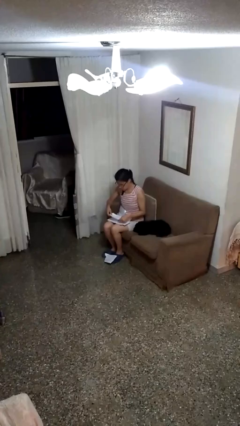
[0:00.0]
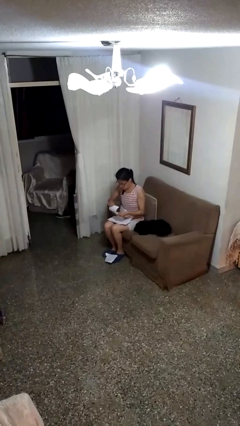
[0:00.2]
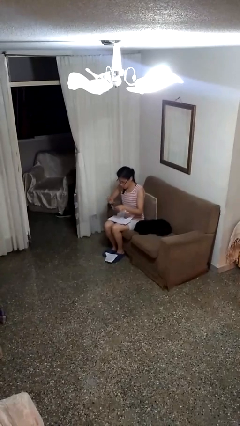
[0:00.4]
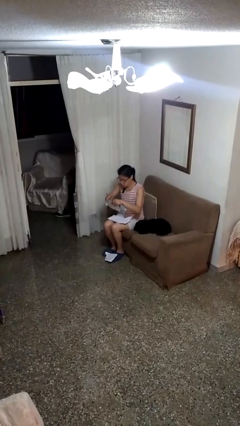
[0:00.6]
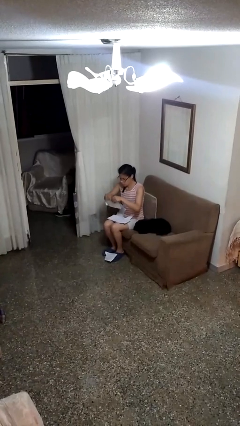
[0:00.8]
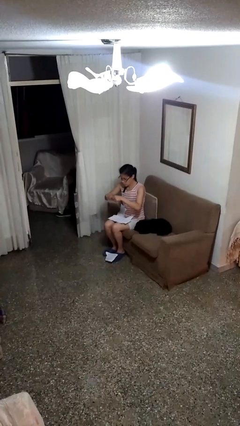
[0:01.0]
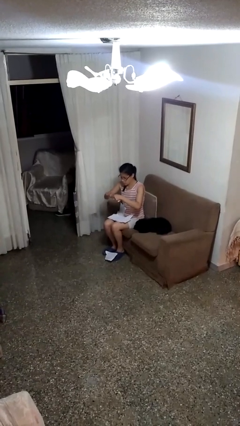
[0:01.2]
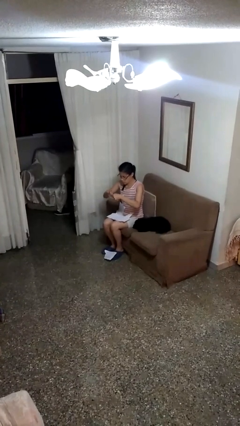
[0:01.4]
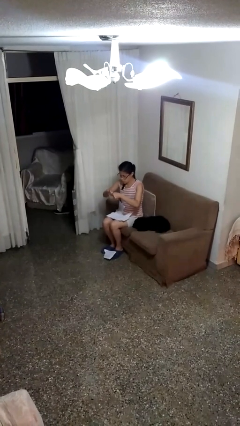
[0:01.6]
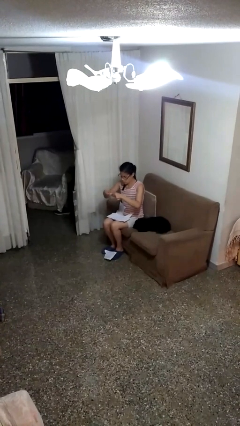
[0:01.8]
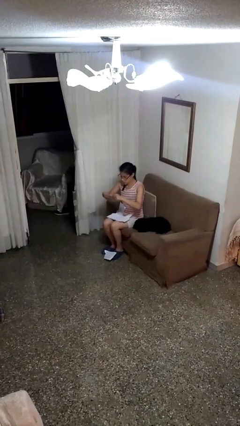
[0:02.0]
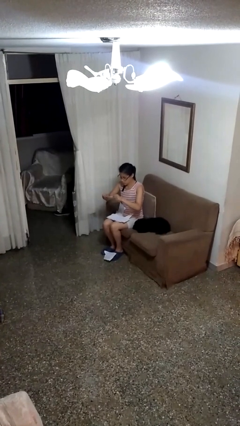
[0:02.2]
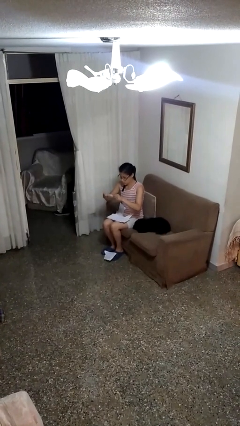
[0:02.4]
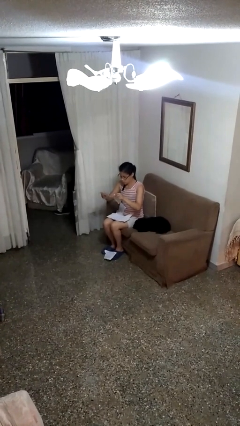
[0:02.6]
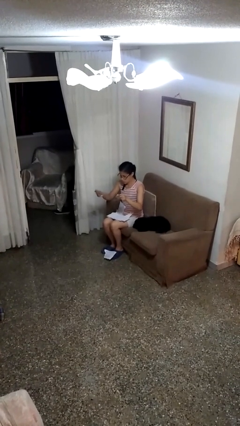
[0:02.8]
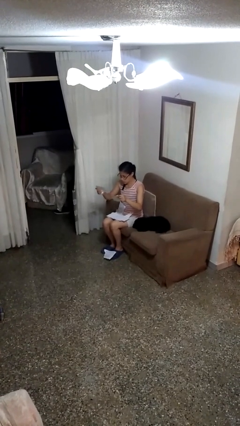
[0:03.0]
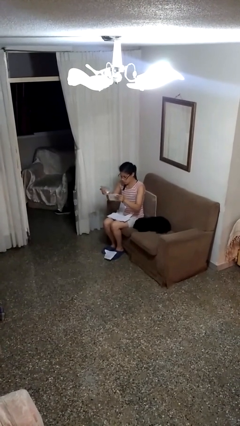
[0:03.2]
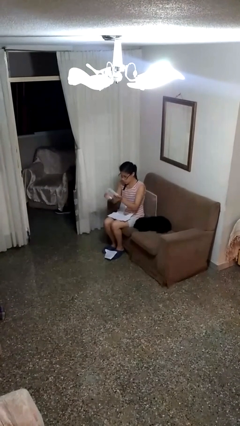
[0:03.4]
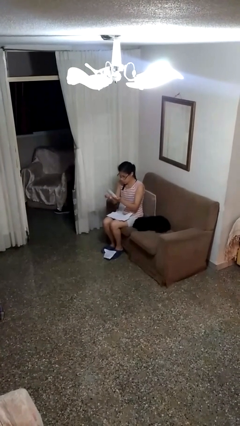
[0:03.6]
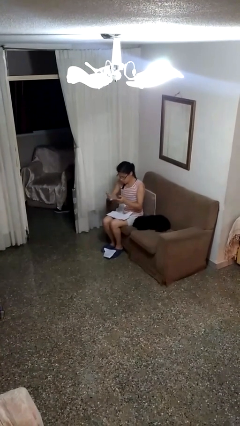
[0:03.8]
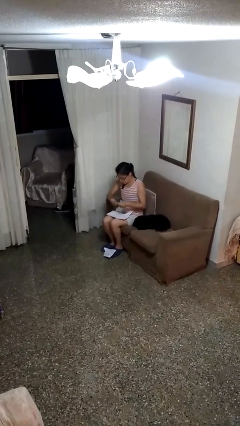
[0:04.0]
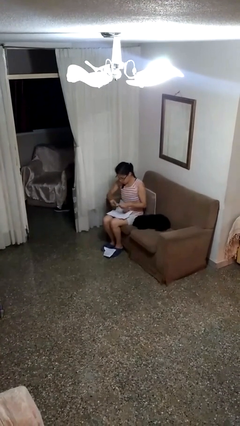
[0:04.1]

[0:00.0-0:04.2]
person tears paper

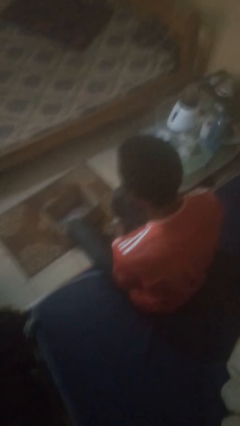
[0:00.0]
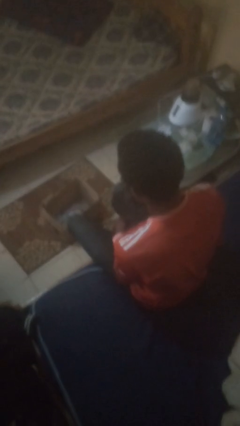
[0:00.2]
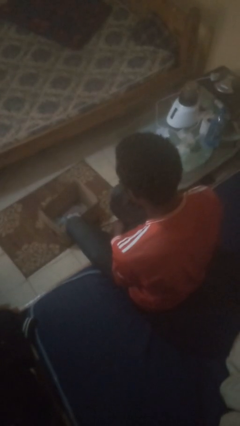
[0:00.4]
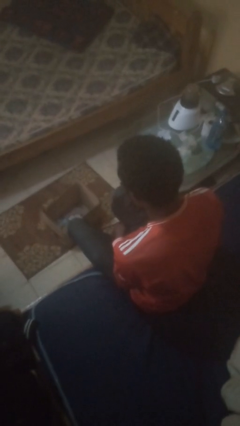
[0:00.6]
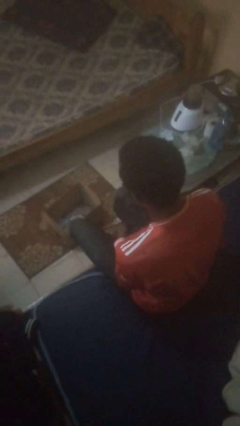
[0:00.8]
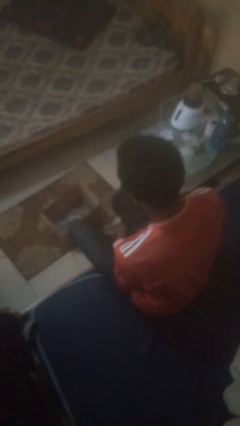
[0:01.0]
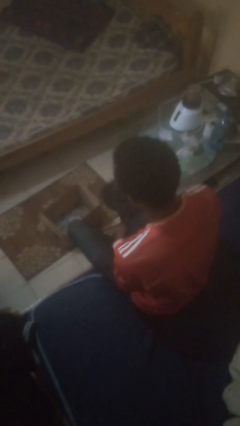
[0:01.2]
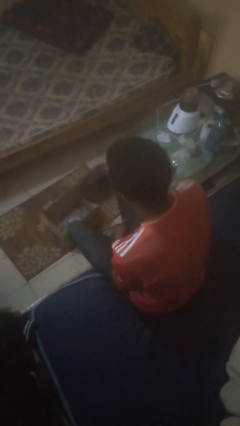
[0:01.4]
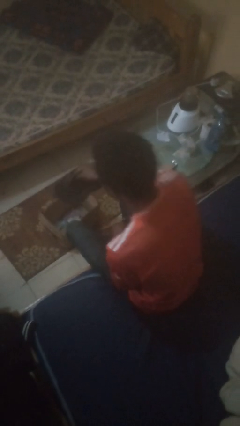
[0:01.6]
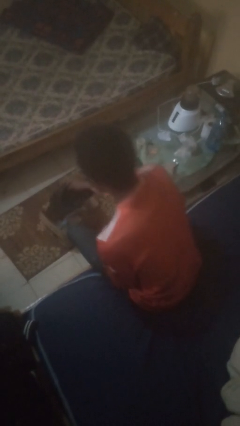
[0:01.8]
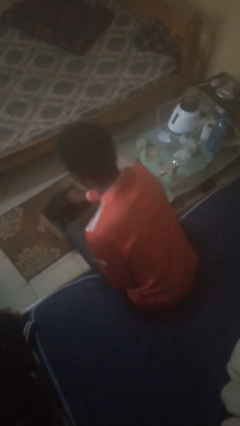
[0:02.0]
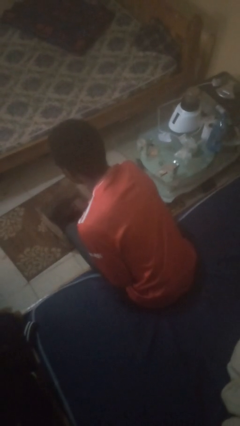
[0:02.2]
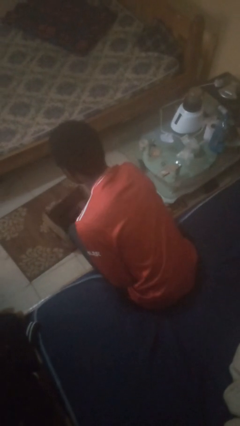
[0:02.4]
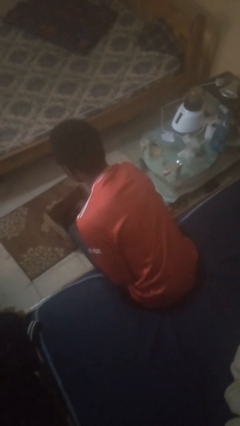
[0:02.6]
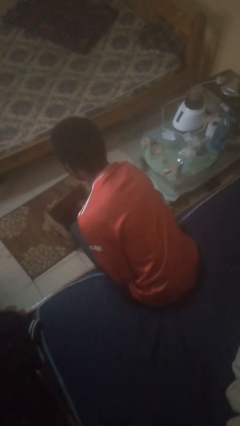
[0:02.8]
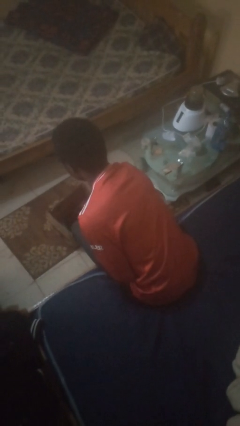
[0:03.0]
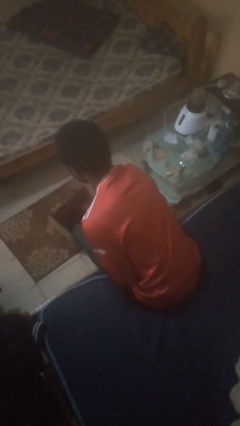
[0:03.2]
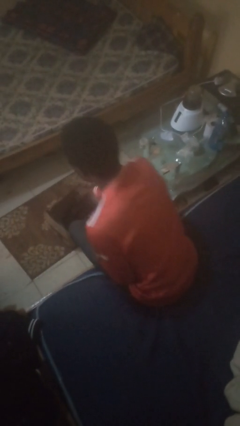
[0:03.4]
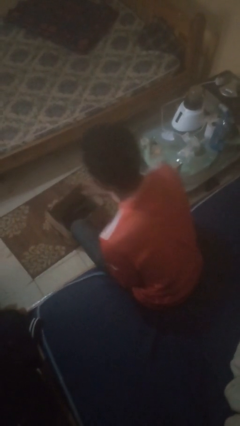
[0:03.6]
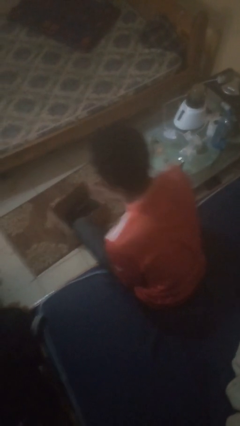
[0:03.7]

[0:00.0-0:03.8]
person puts object into box

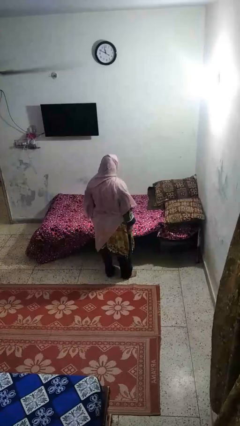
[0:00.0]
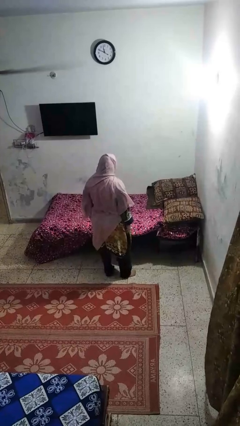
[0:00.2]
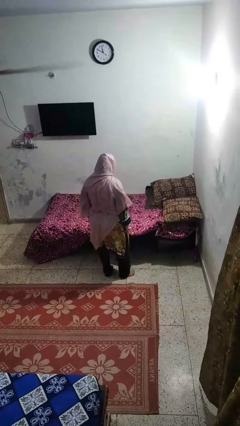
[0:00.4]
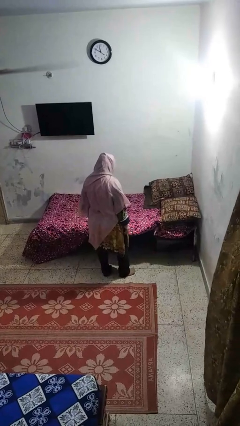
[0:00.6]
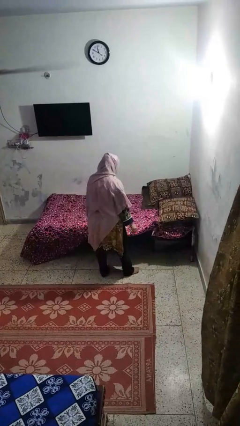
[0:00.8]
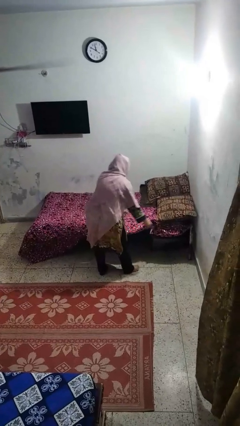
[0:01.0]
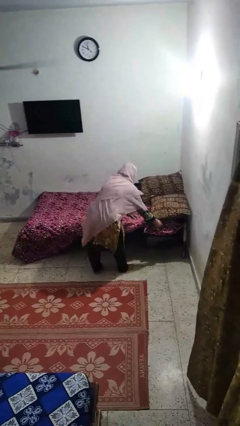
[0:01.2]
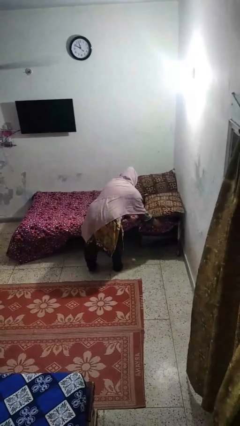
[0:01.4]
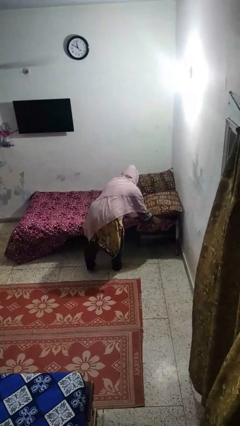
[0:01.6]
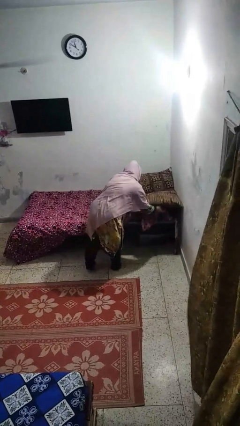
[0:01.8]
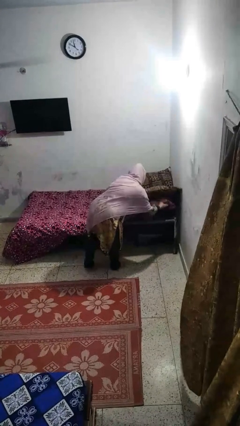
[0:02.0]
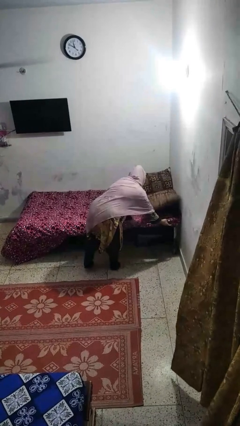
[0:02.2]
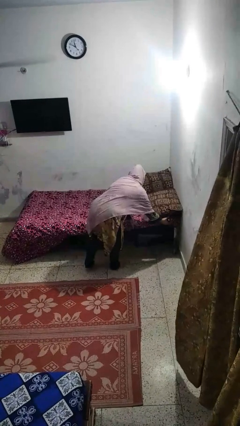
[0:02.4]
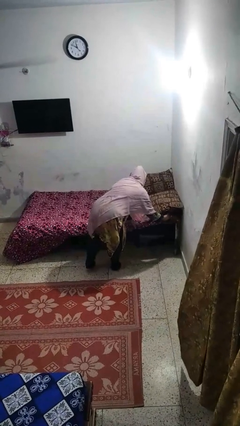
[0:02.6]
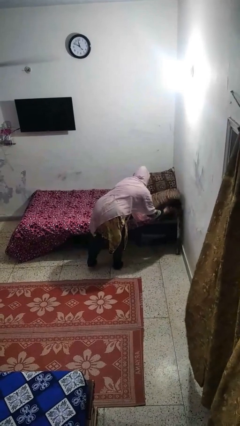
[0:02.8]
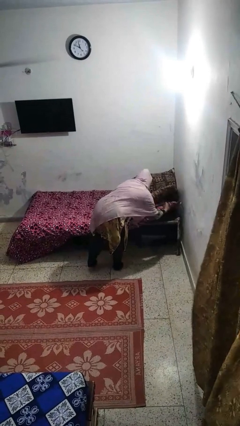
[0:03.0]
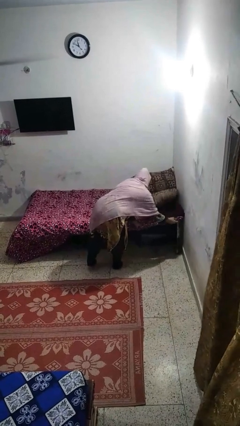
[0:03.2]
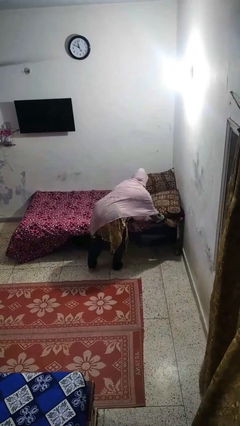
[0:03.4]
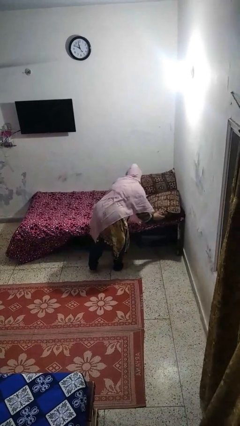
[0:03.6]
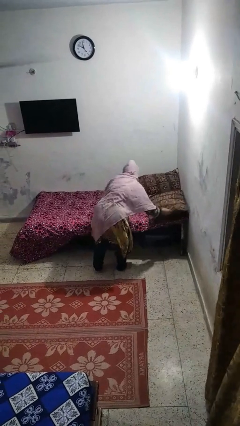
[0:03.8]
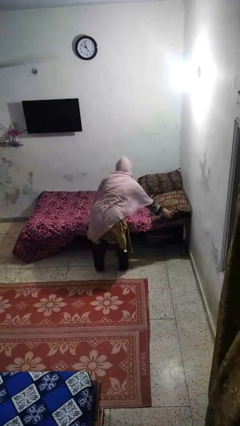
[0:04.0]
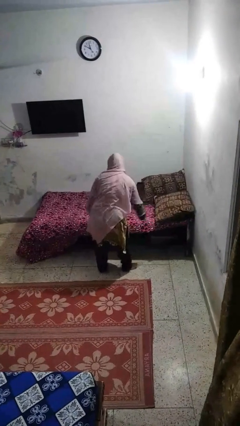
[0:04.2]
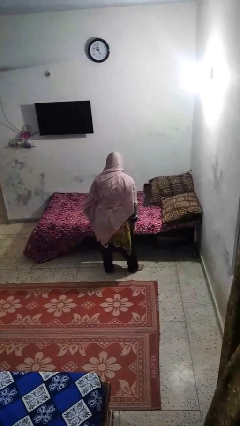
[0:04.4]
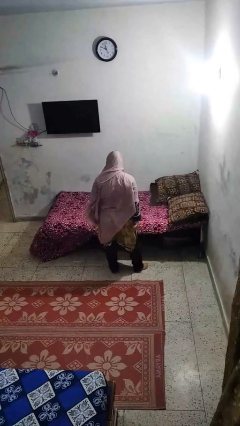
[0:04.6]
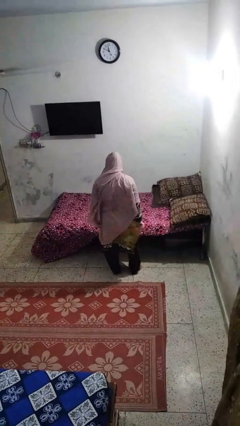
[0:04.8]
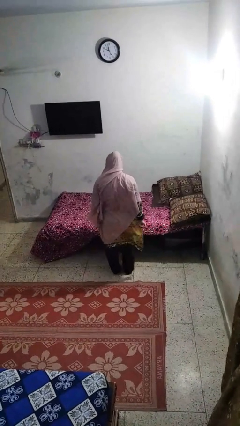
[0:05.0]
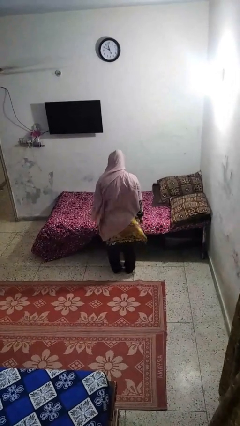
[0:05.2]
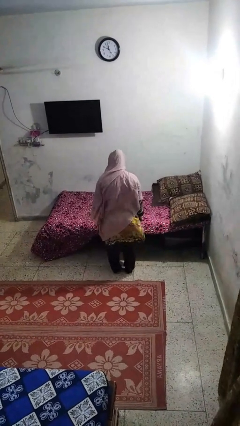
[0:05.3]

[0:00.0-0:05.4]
person makes bed

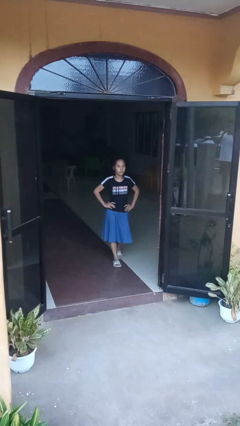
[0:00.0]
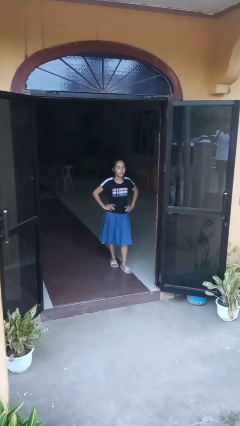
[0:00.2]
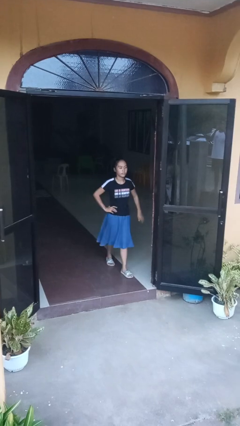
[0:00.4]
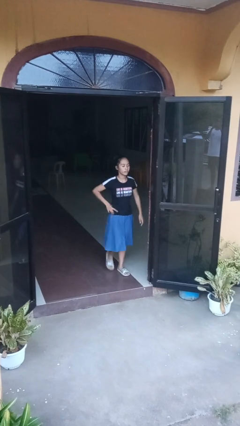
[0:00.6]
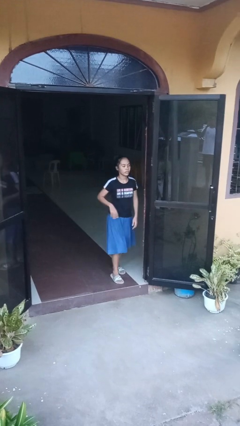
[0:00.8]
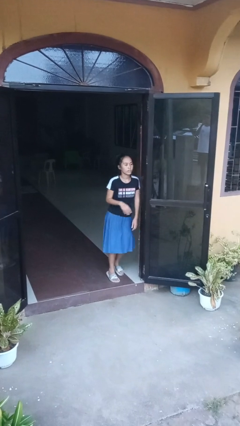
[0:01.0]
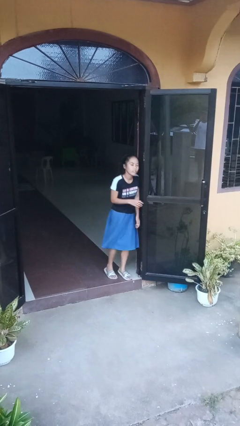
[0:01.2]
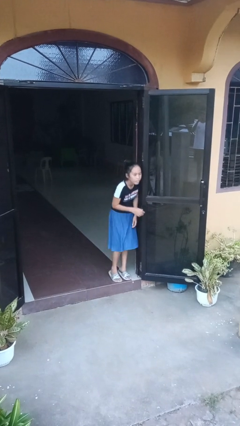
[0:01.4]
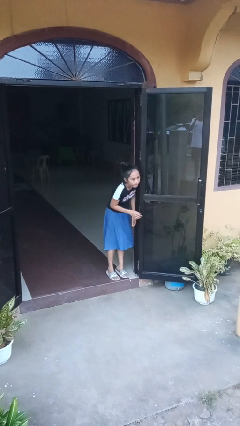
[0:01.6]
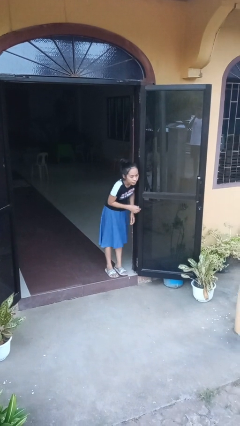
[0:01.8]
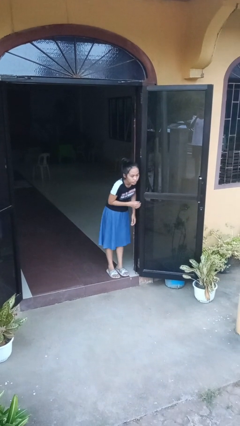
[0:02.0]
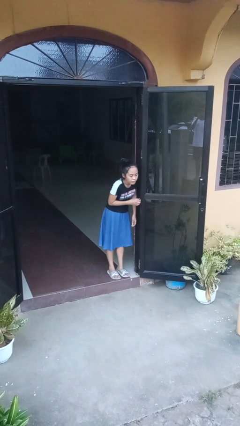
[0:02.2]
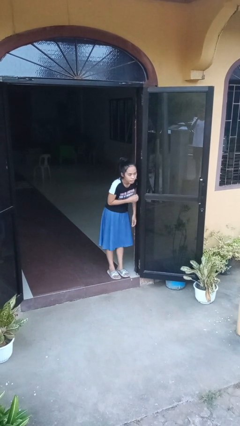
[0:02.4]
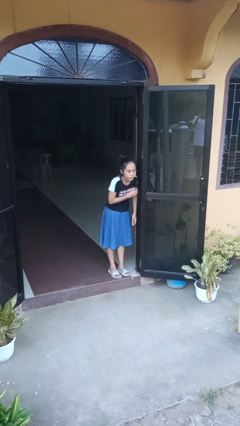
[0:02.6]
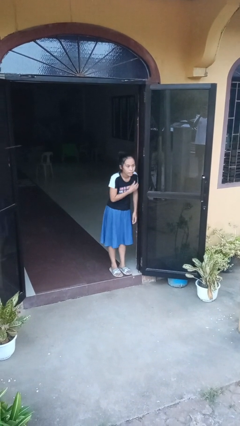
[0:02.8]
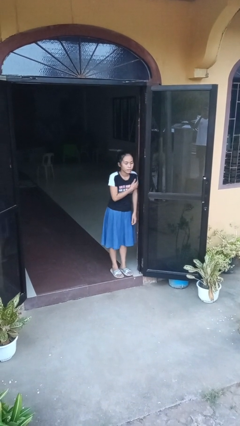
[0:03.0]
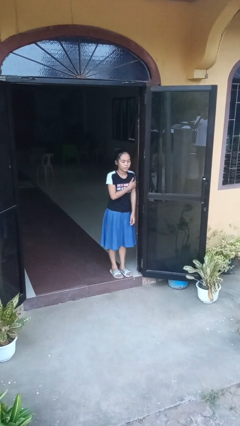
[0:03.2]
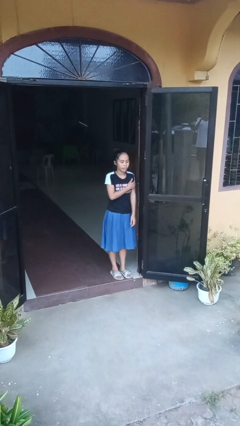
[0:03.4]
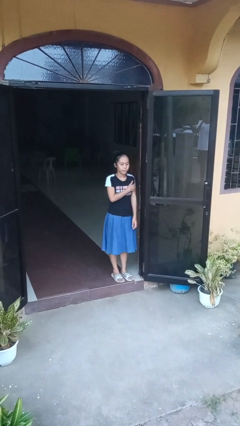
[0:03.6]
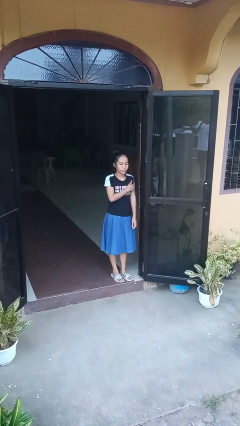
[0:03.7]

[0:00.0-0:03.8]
person bumps into wall

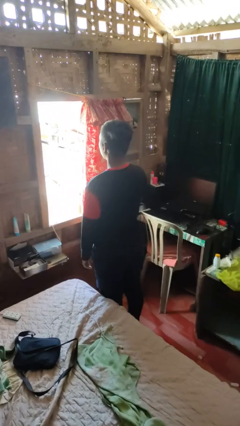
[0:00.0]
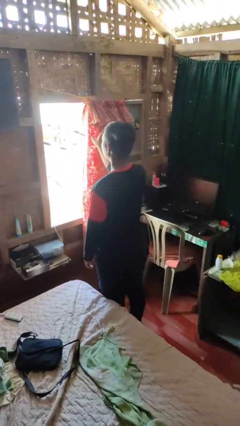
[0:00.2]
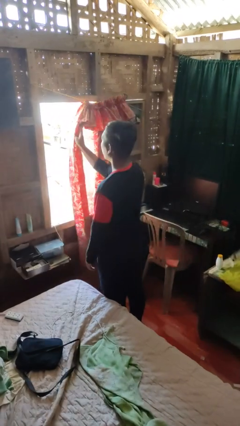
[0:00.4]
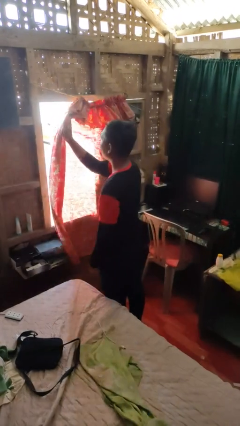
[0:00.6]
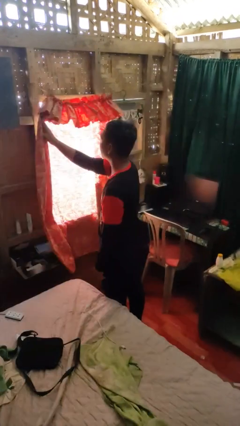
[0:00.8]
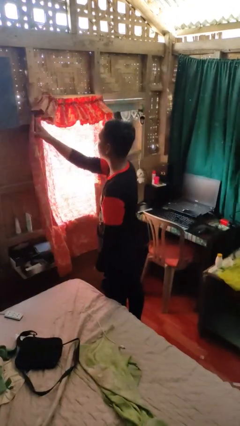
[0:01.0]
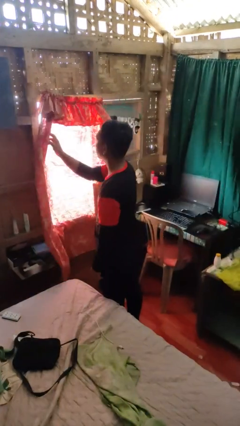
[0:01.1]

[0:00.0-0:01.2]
person closes curtains
